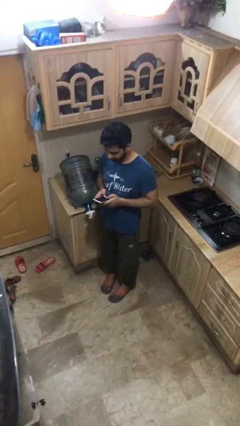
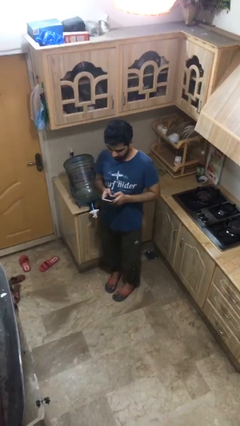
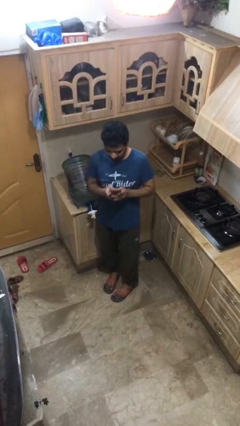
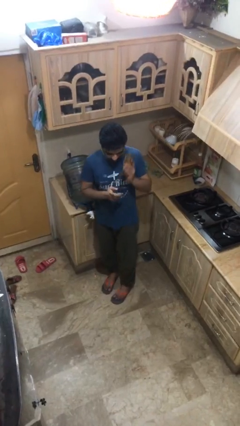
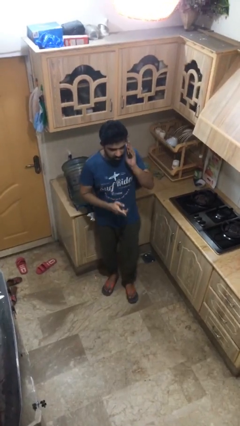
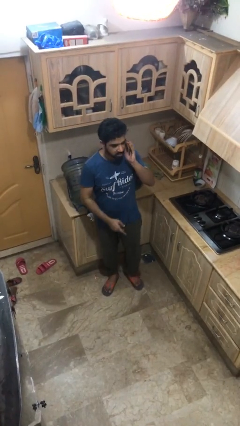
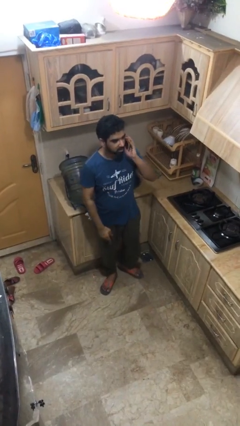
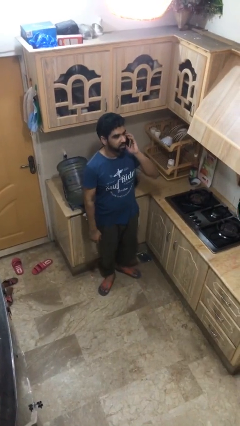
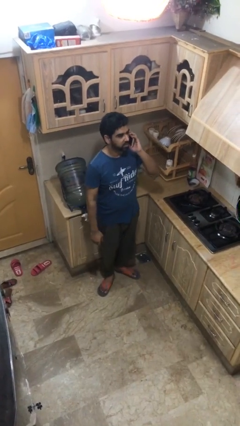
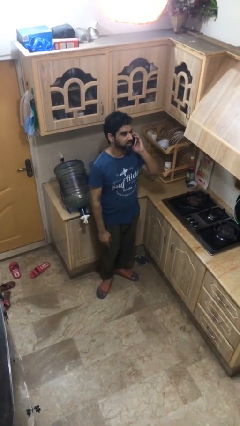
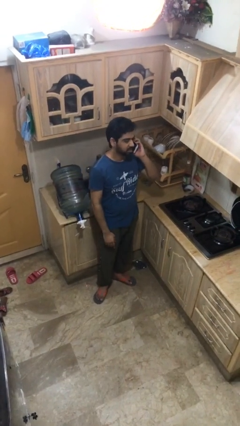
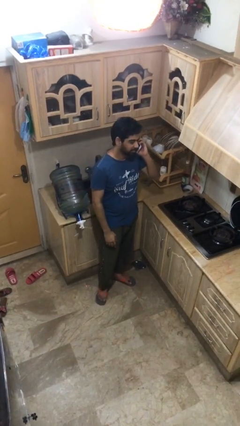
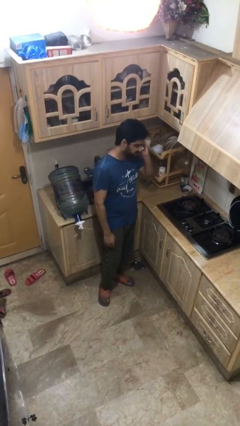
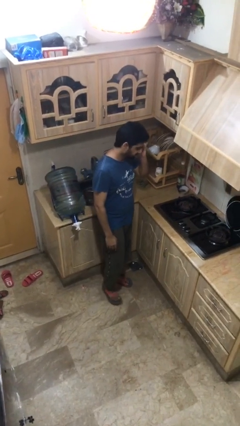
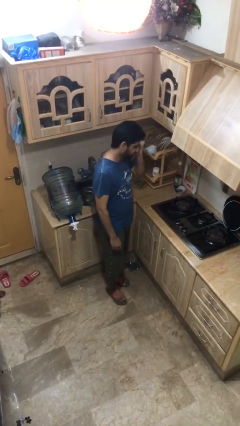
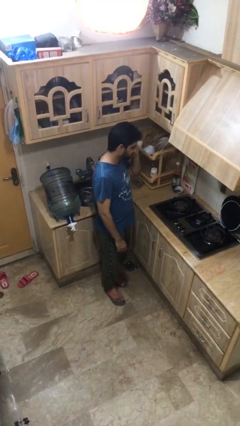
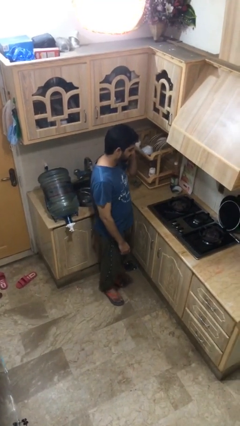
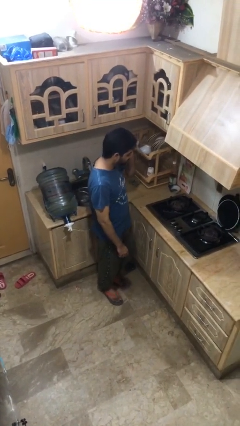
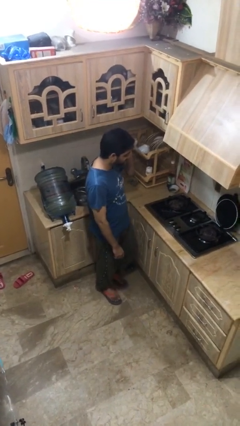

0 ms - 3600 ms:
person talks on phone

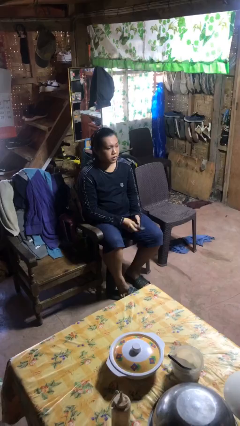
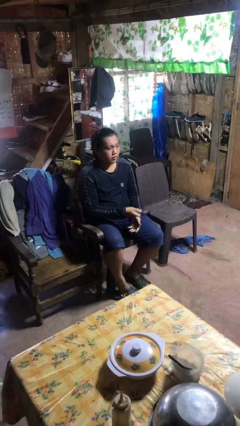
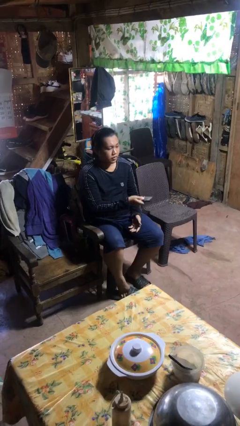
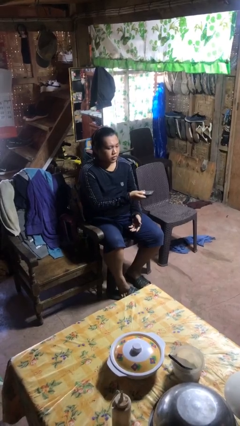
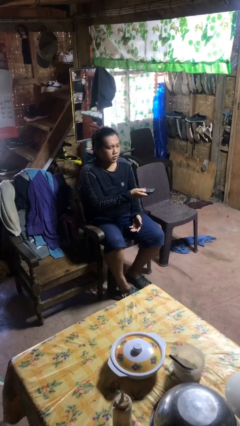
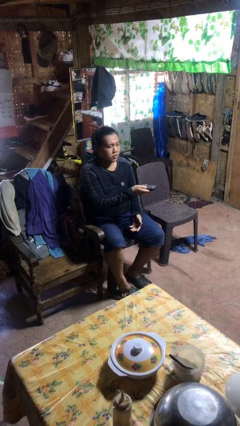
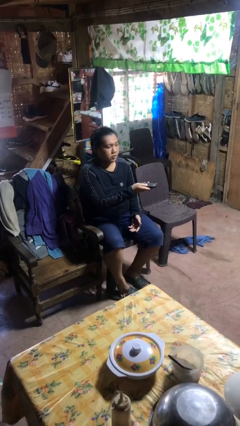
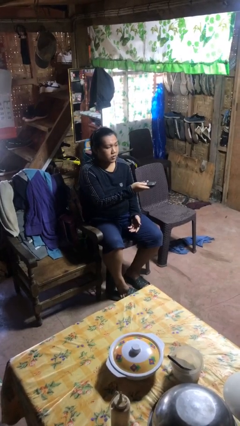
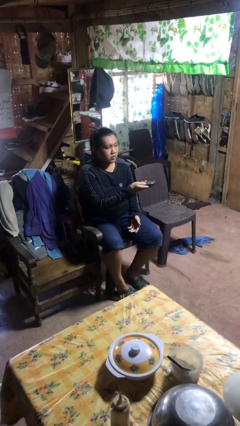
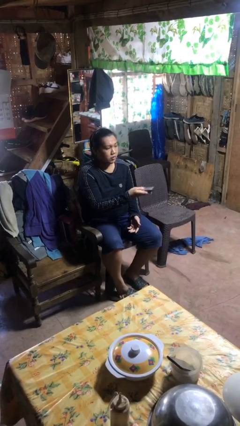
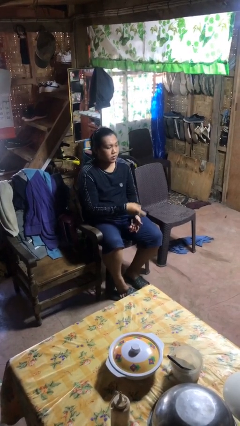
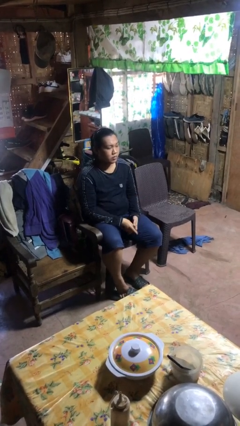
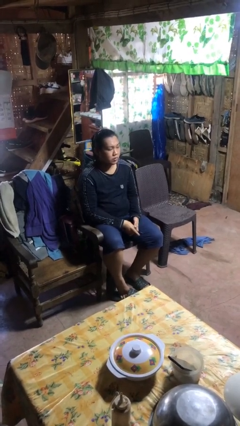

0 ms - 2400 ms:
person uses television remote

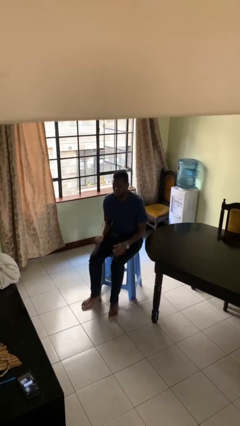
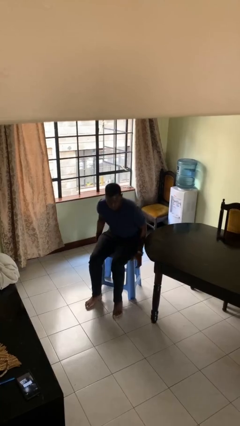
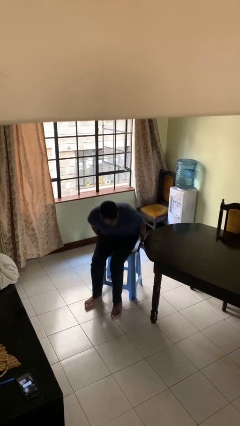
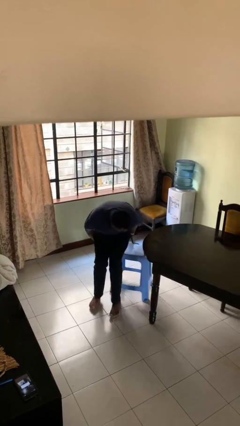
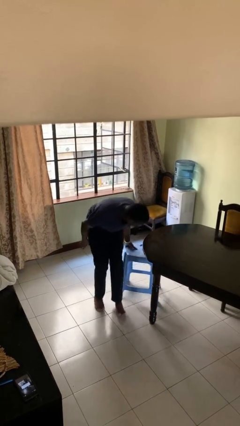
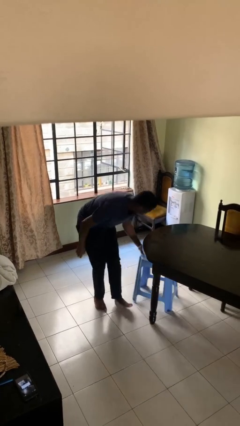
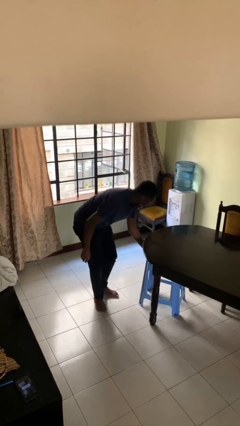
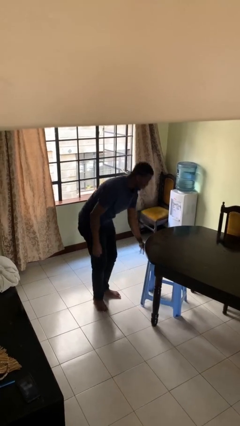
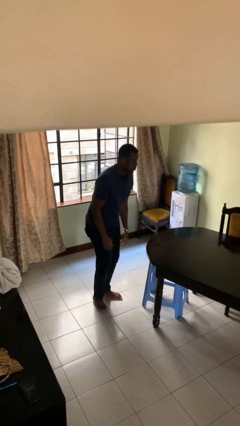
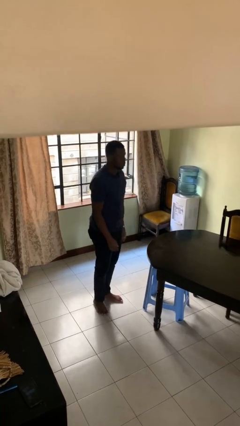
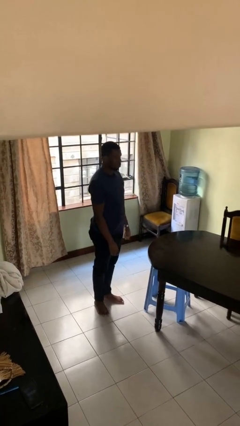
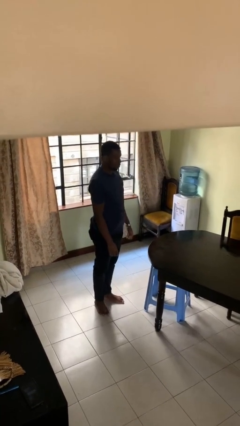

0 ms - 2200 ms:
person stands up

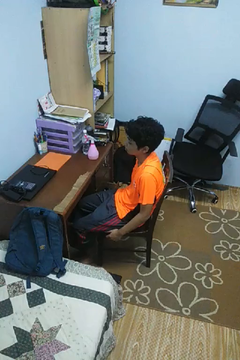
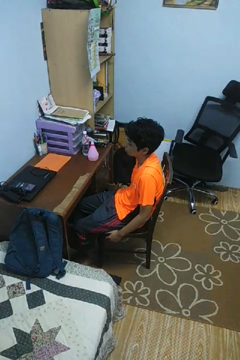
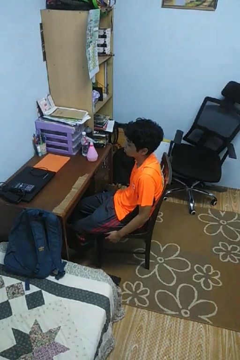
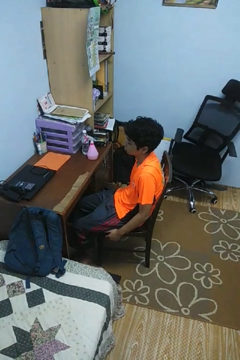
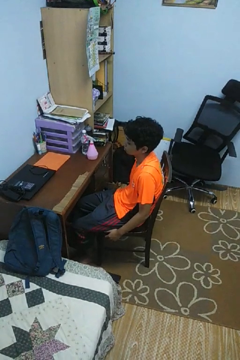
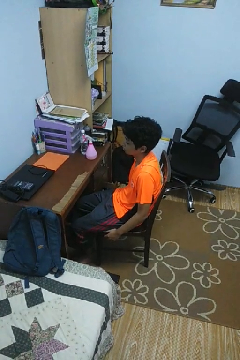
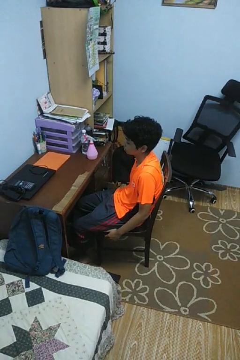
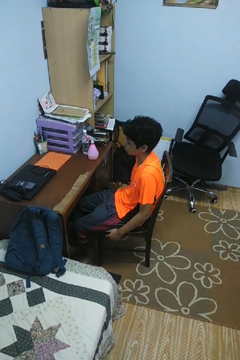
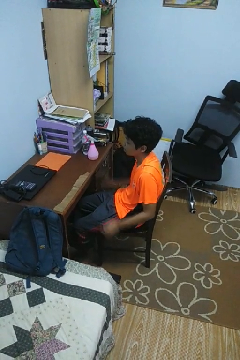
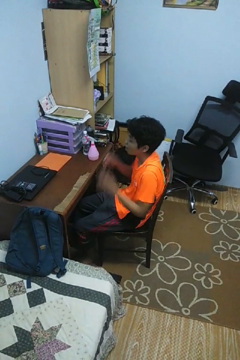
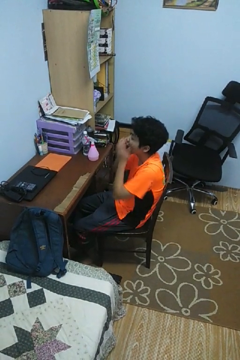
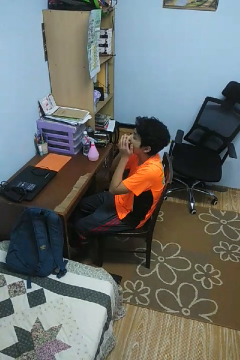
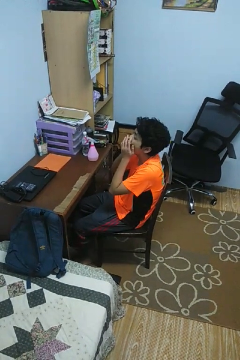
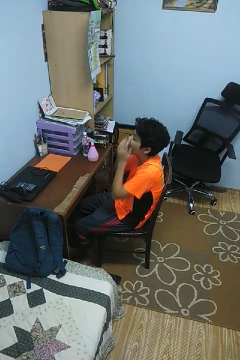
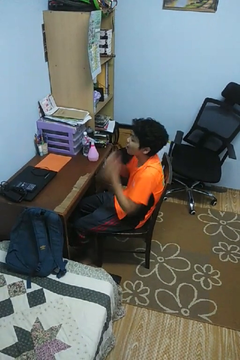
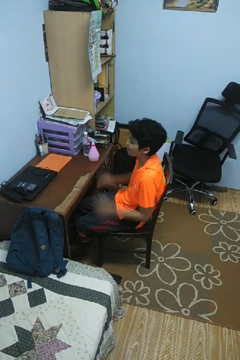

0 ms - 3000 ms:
person yawns

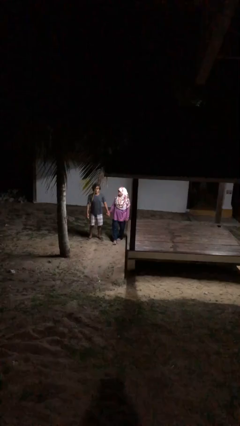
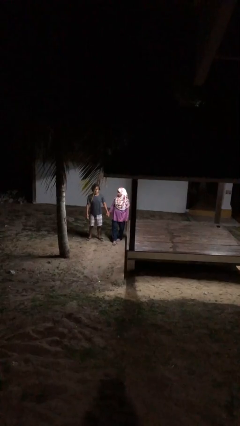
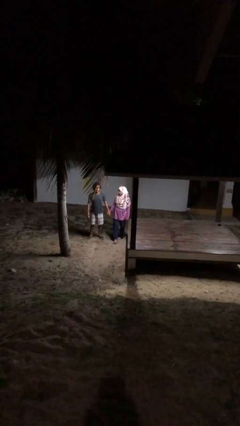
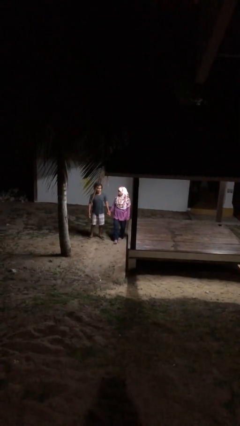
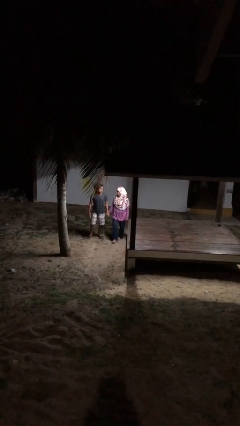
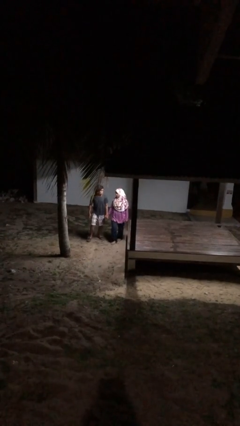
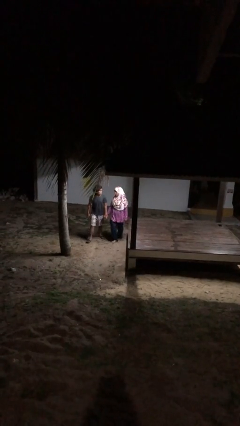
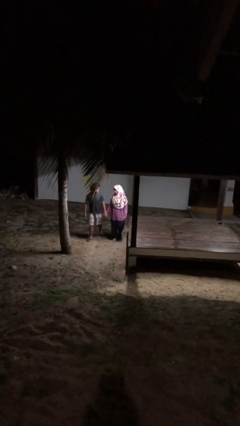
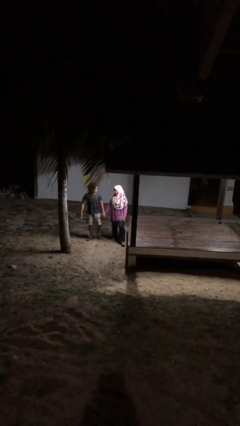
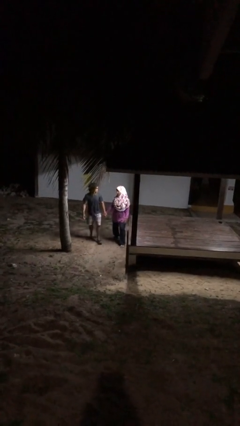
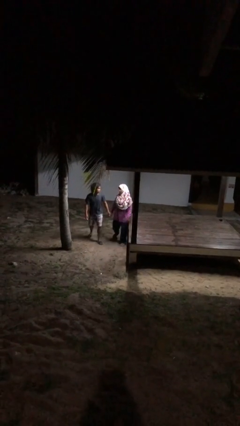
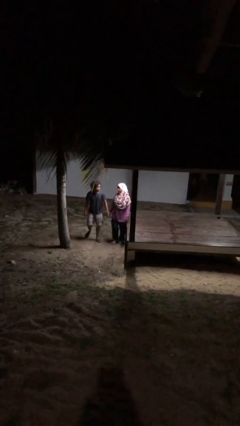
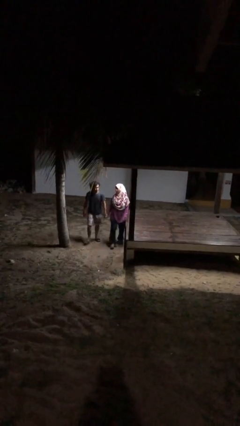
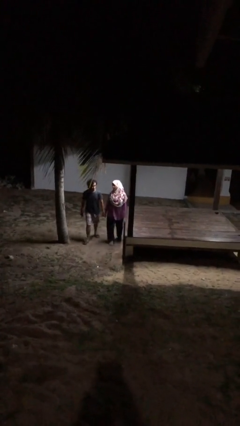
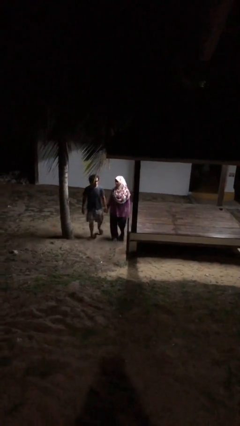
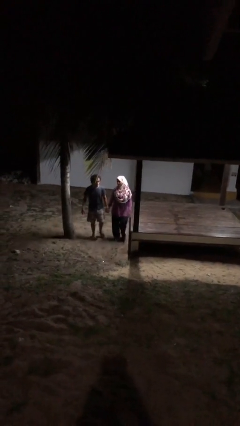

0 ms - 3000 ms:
person holds hand

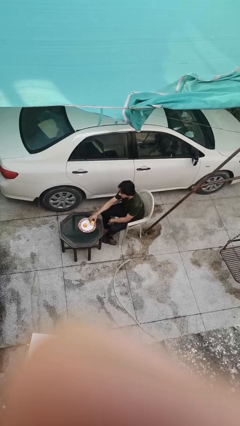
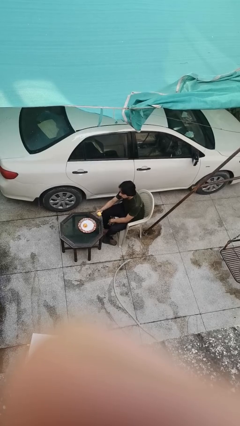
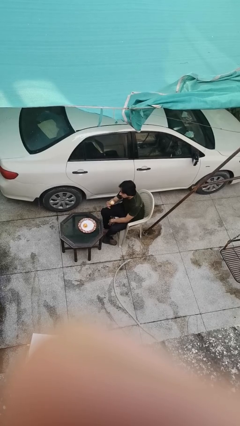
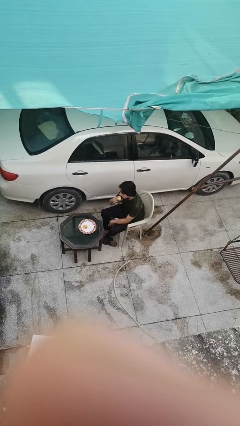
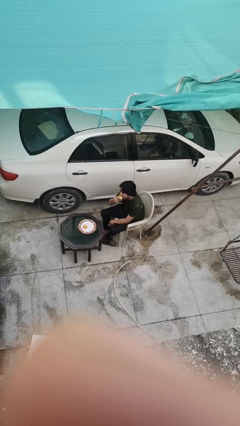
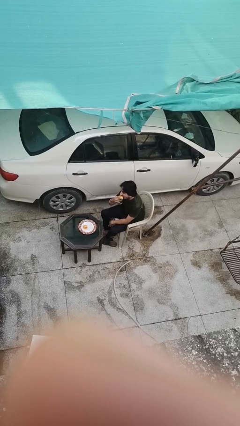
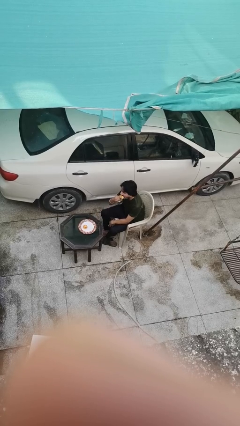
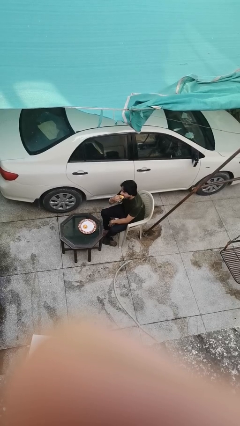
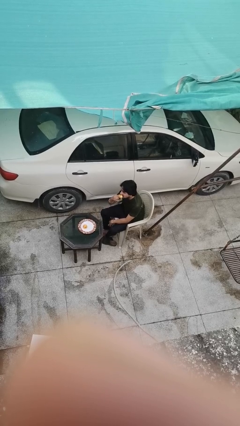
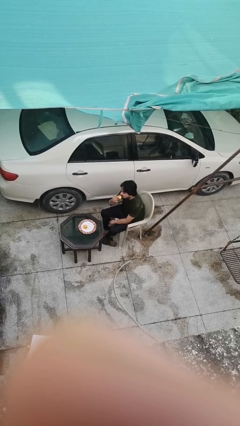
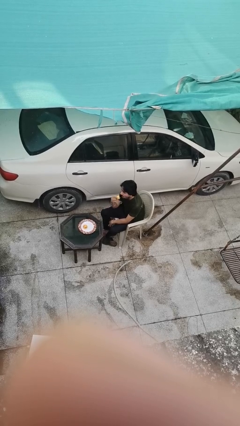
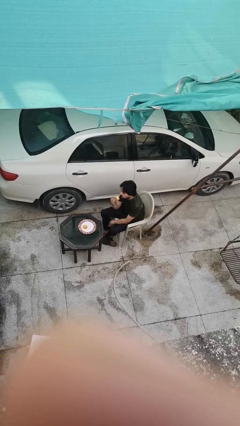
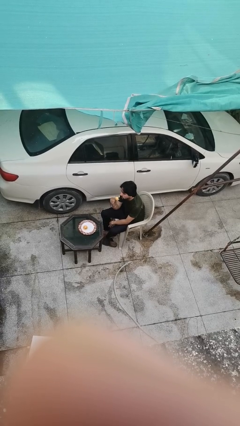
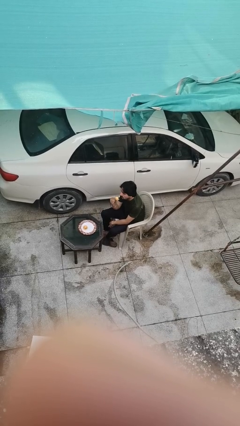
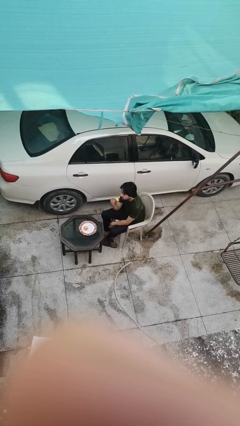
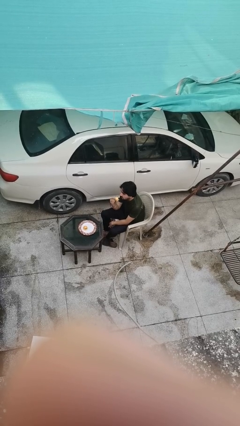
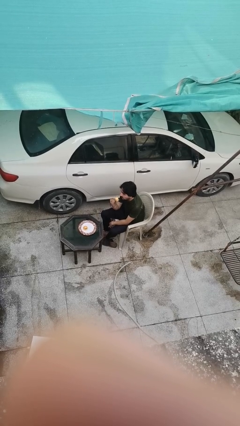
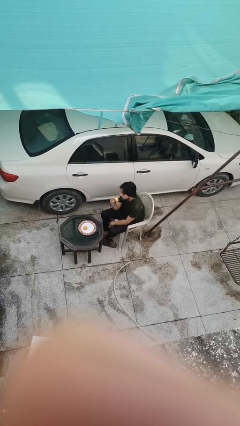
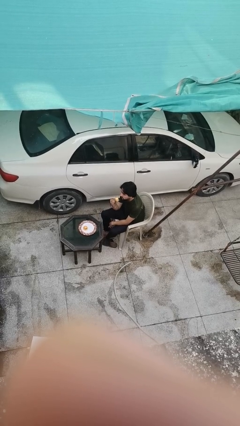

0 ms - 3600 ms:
person eats with hands
